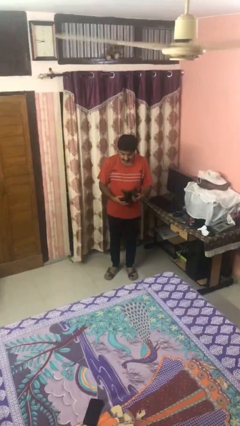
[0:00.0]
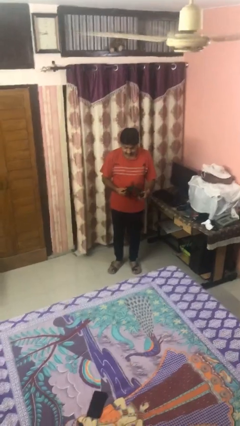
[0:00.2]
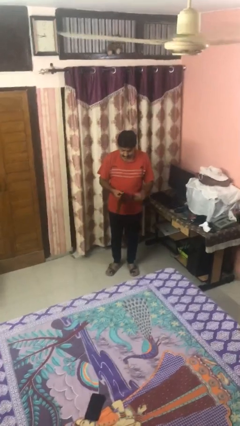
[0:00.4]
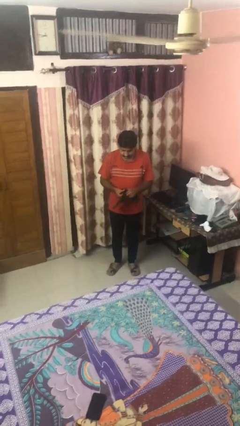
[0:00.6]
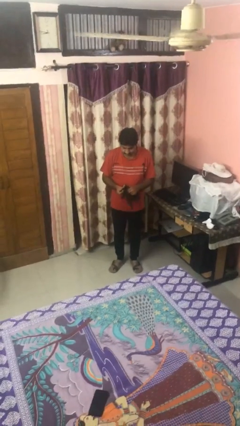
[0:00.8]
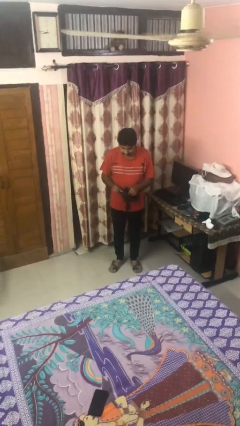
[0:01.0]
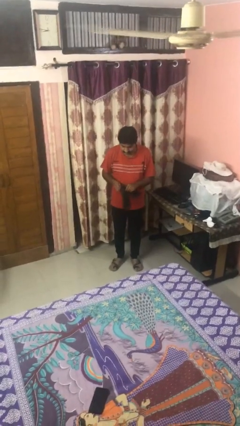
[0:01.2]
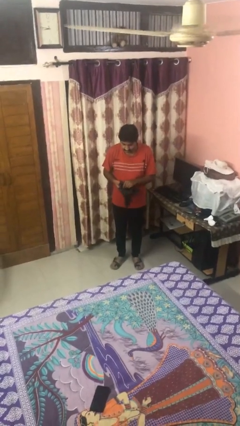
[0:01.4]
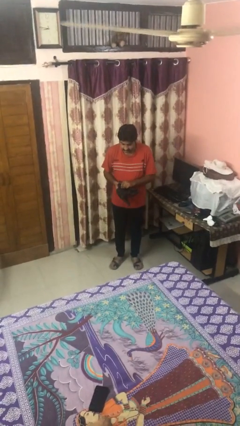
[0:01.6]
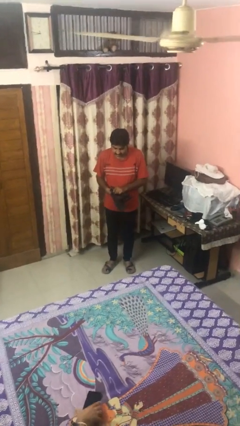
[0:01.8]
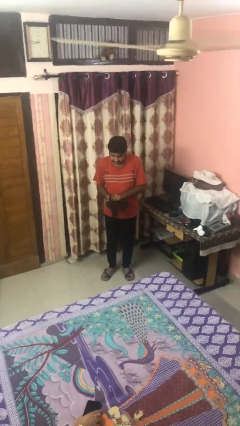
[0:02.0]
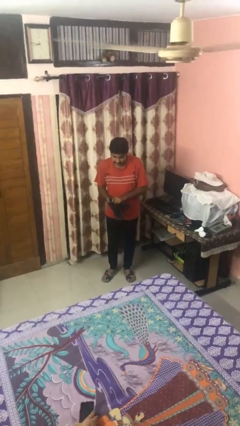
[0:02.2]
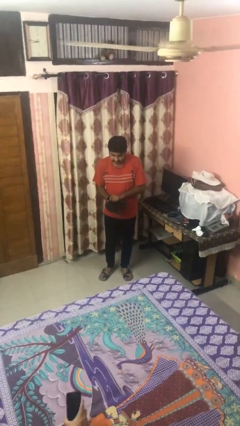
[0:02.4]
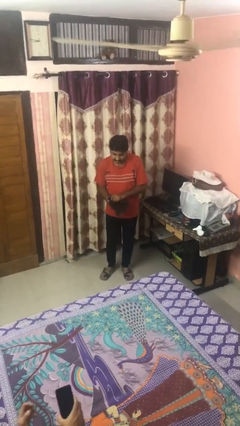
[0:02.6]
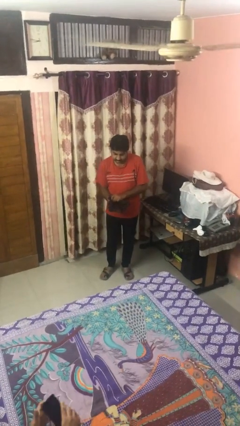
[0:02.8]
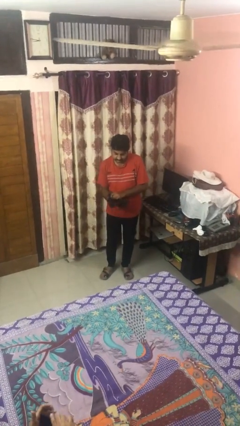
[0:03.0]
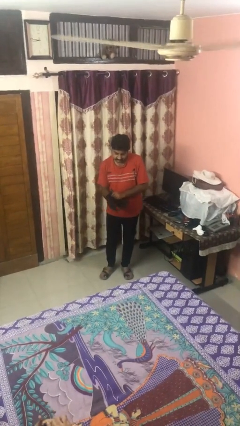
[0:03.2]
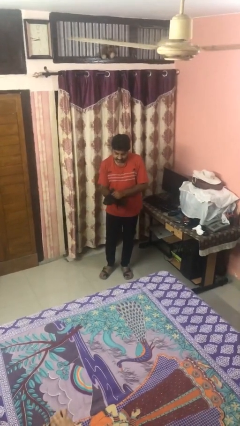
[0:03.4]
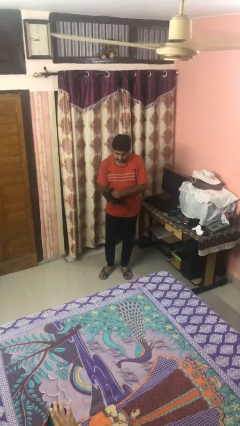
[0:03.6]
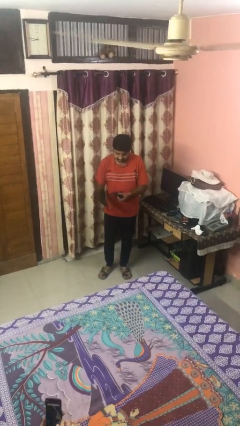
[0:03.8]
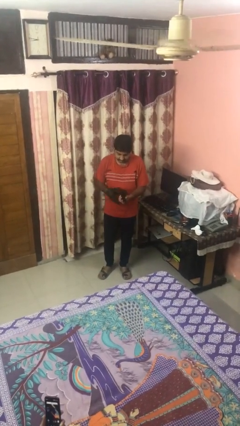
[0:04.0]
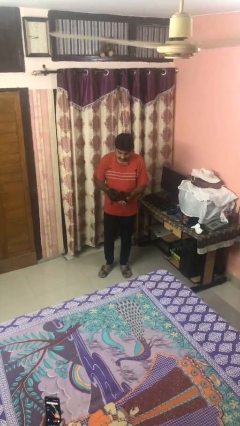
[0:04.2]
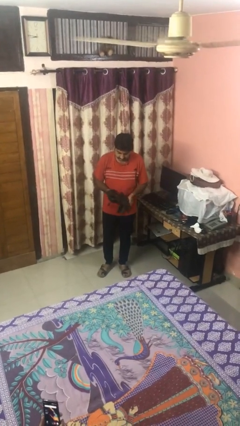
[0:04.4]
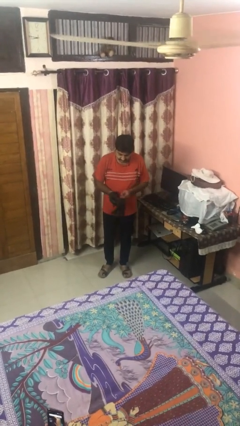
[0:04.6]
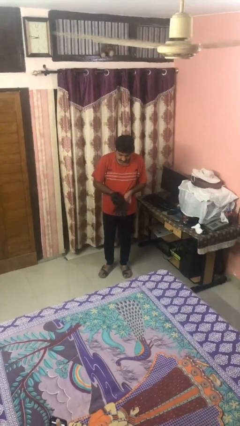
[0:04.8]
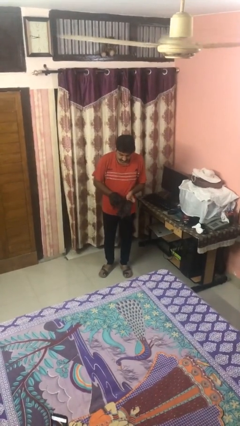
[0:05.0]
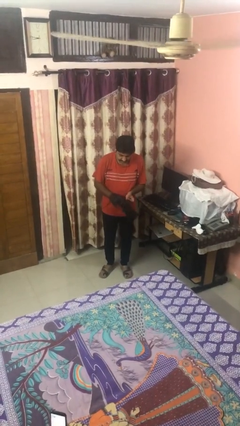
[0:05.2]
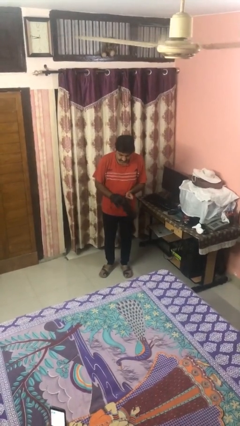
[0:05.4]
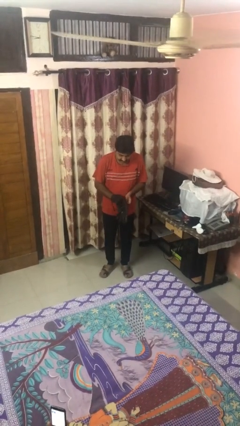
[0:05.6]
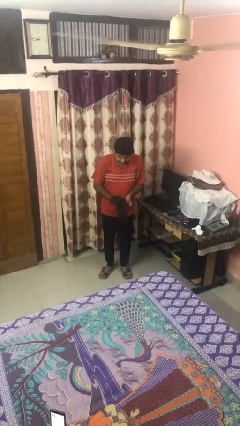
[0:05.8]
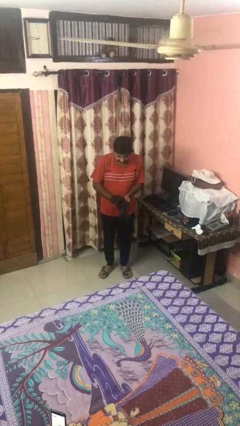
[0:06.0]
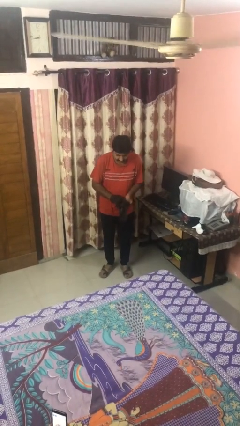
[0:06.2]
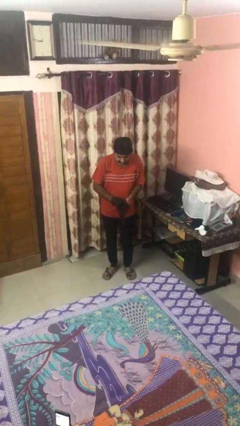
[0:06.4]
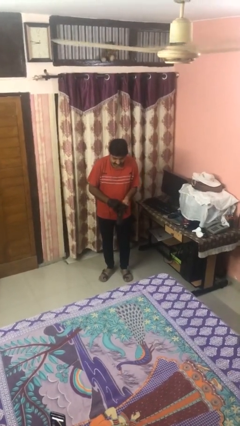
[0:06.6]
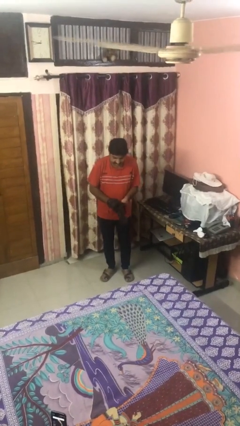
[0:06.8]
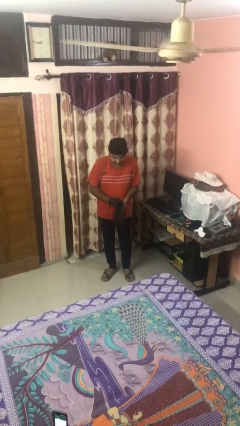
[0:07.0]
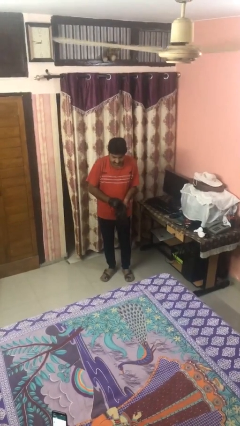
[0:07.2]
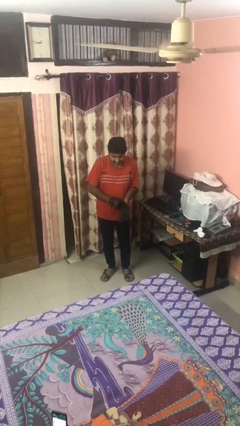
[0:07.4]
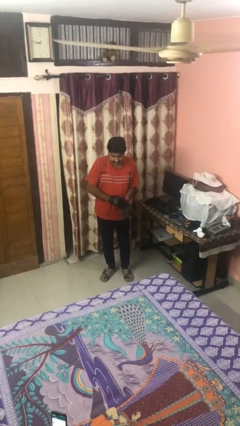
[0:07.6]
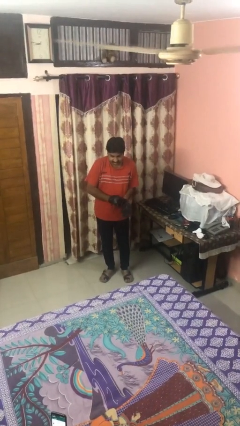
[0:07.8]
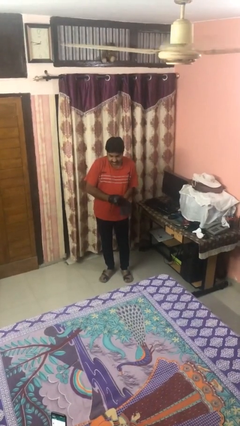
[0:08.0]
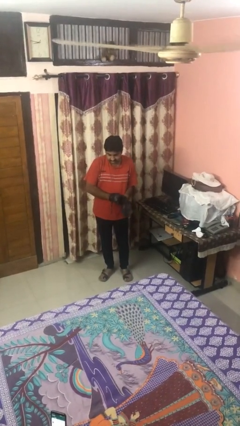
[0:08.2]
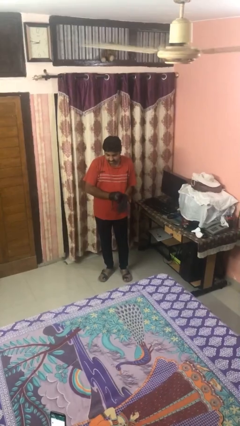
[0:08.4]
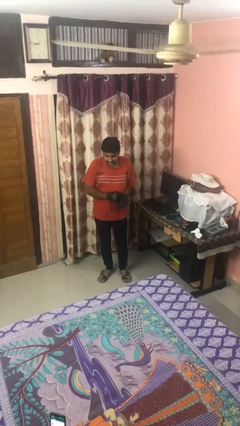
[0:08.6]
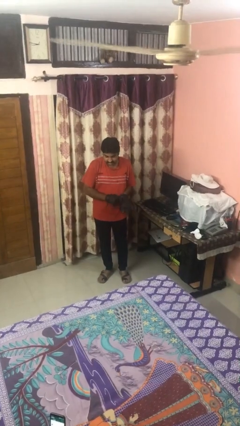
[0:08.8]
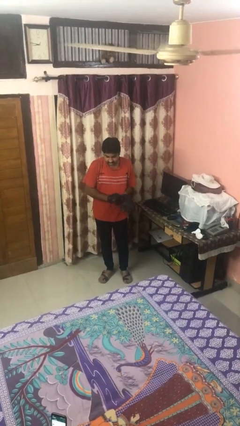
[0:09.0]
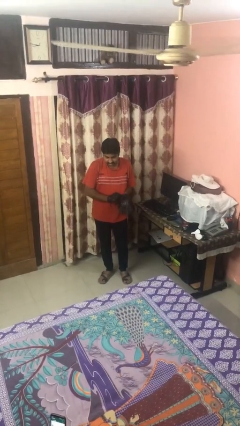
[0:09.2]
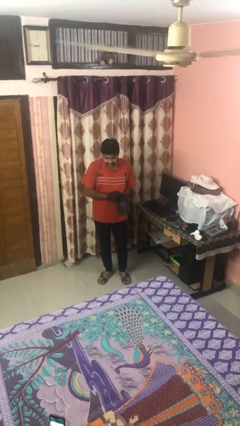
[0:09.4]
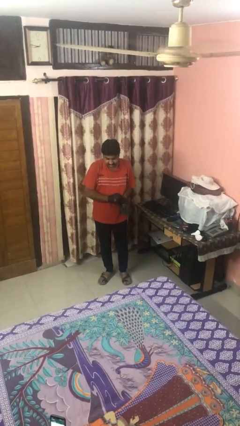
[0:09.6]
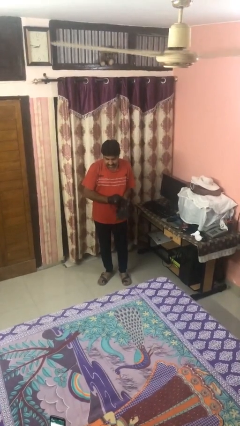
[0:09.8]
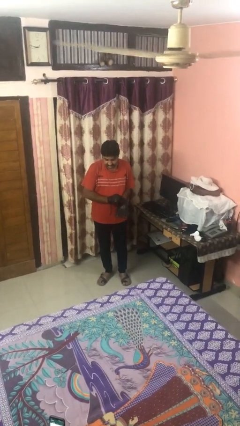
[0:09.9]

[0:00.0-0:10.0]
person puts on gloves

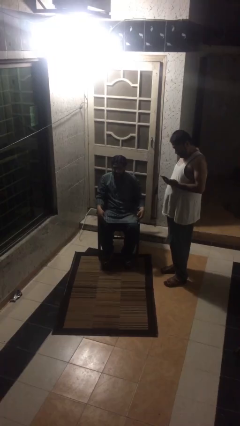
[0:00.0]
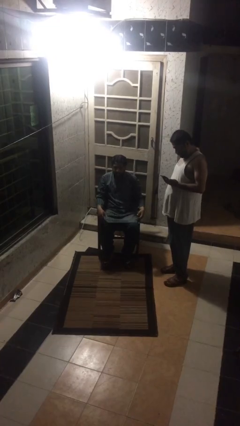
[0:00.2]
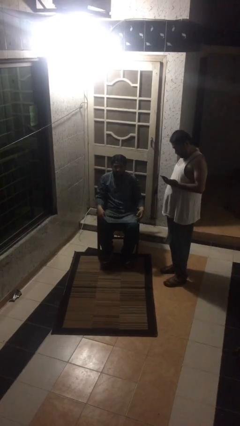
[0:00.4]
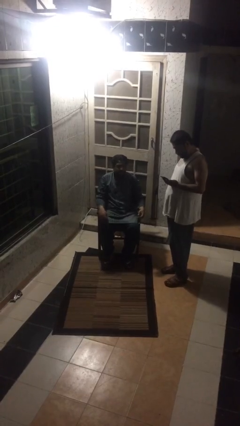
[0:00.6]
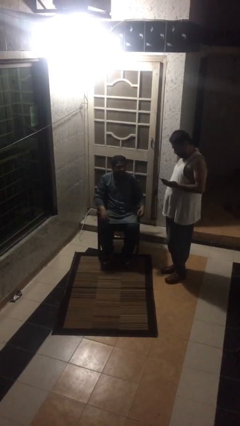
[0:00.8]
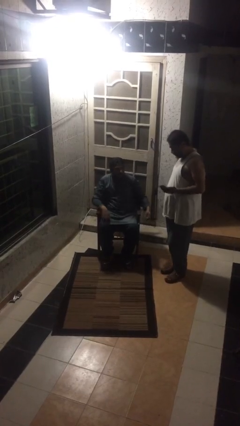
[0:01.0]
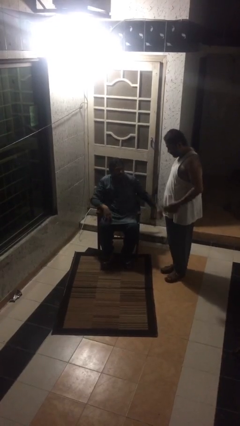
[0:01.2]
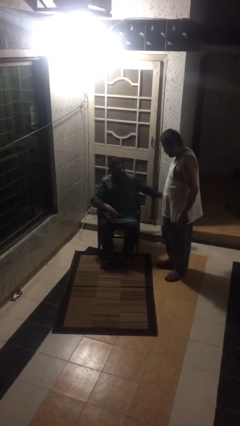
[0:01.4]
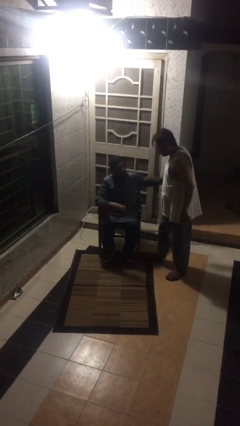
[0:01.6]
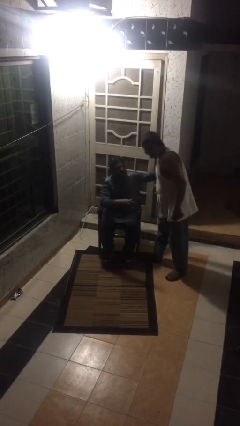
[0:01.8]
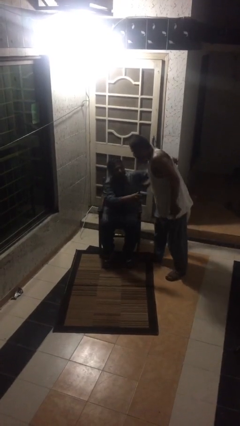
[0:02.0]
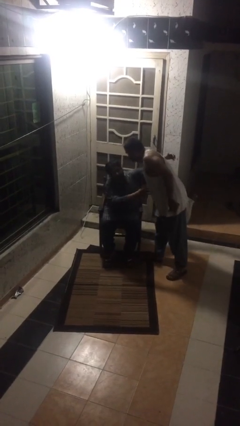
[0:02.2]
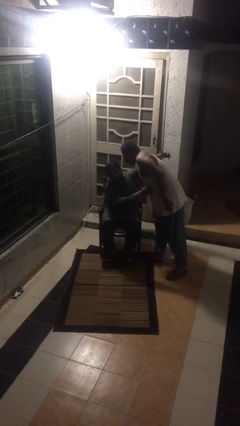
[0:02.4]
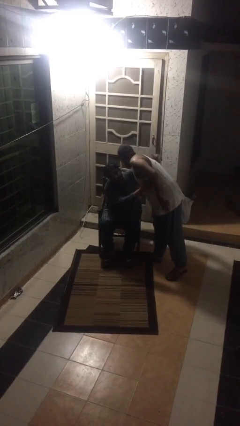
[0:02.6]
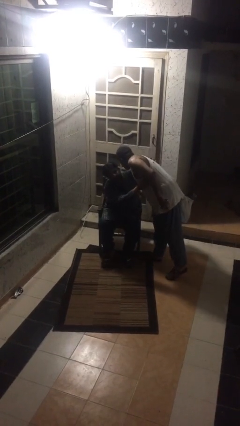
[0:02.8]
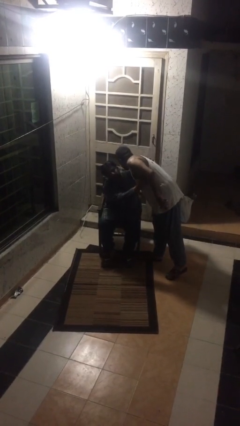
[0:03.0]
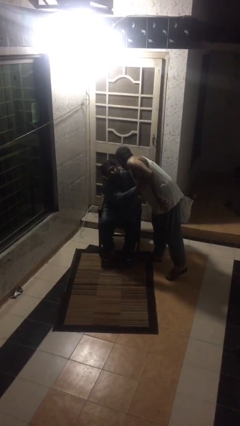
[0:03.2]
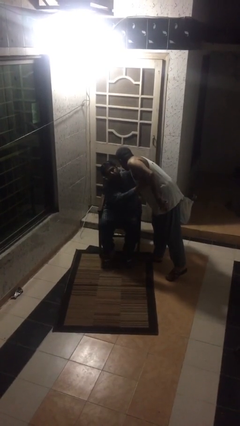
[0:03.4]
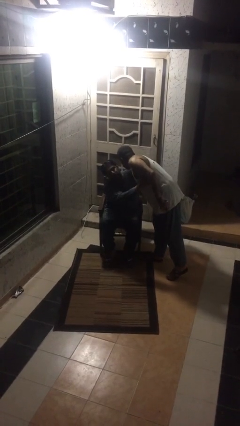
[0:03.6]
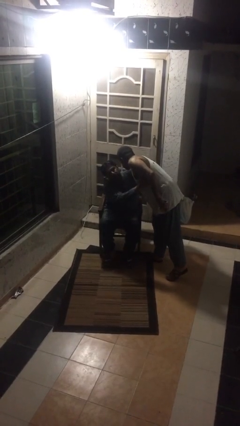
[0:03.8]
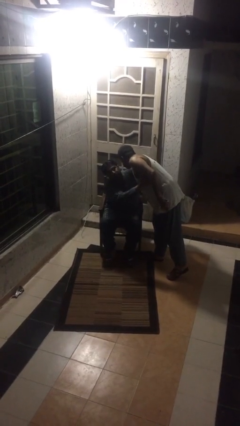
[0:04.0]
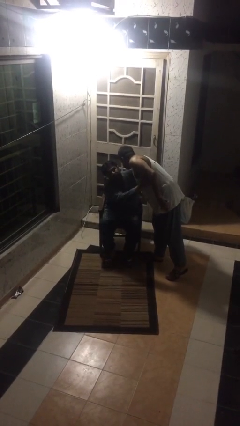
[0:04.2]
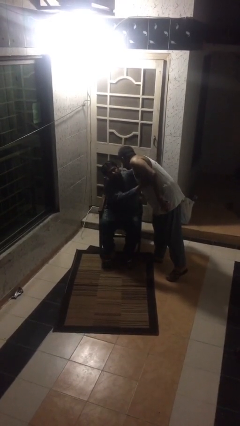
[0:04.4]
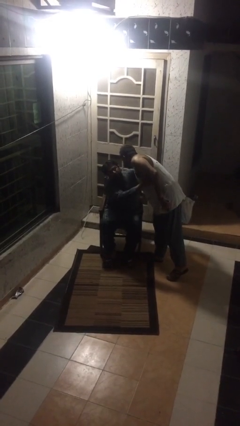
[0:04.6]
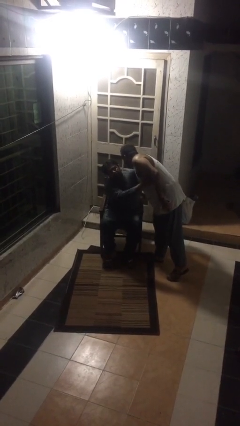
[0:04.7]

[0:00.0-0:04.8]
person embraces person

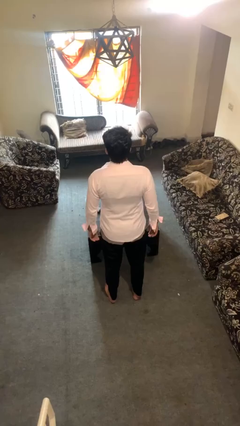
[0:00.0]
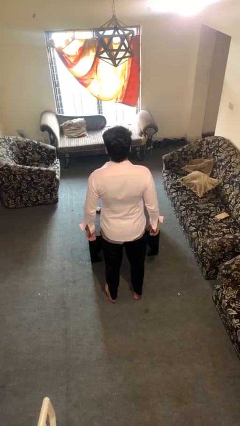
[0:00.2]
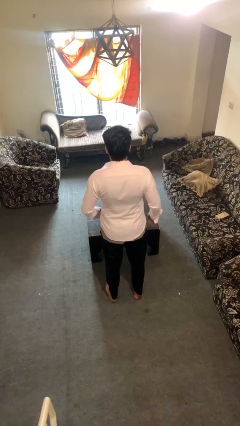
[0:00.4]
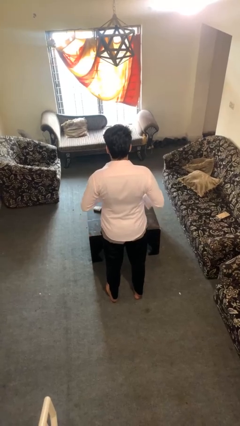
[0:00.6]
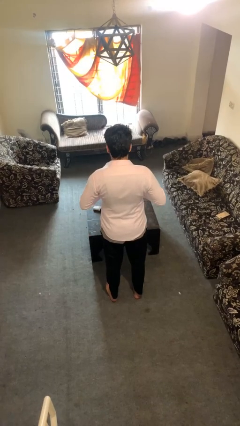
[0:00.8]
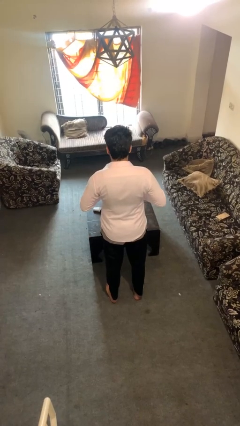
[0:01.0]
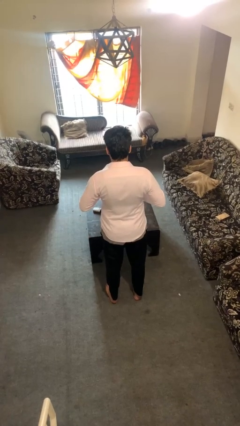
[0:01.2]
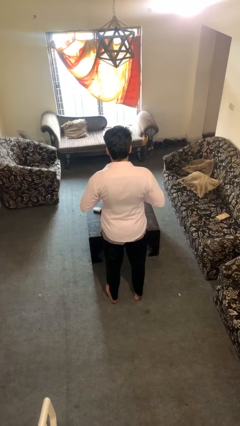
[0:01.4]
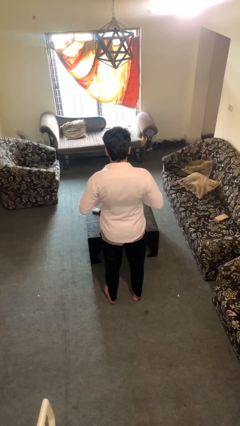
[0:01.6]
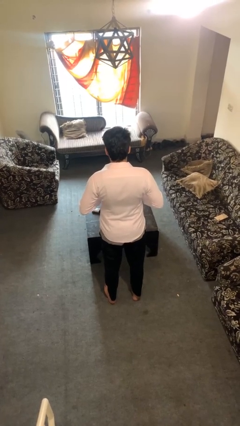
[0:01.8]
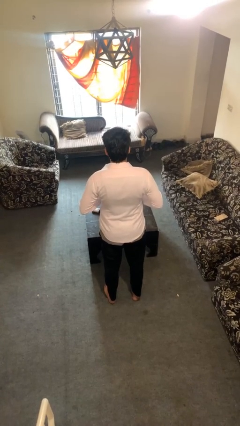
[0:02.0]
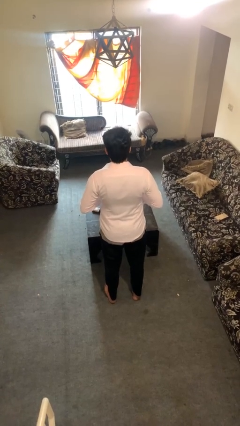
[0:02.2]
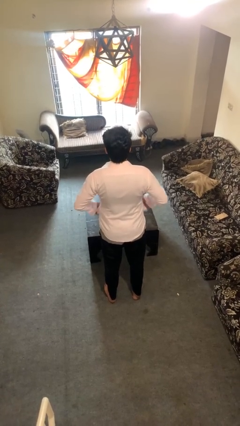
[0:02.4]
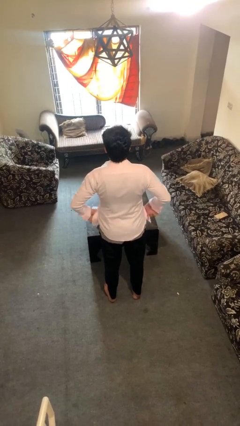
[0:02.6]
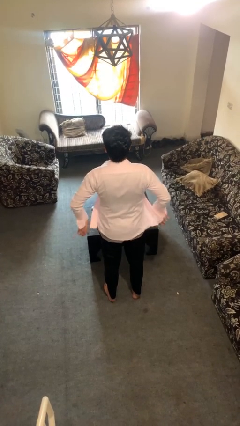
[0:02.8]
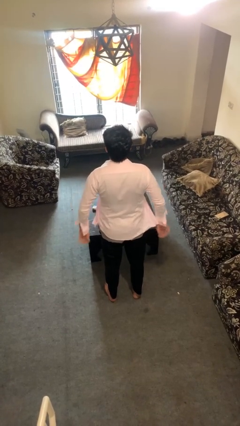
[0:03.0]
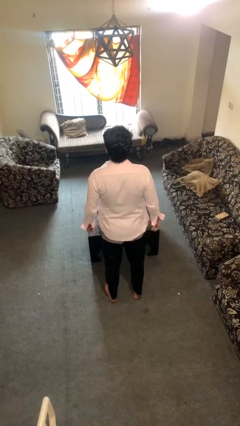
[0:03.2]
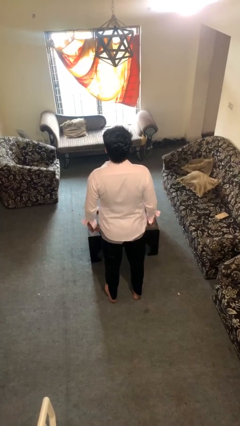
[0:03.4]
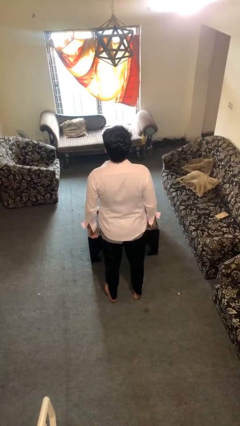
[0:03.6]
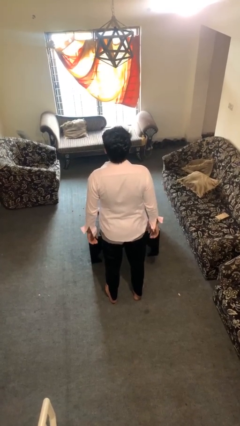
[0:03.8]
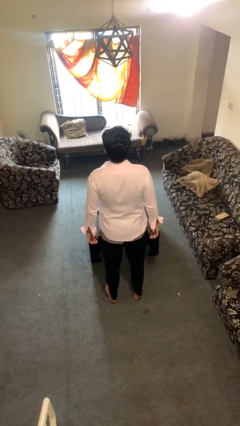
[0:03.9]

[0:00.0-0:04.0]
person unbuttons shirt
